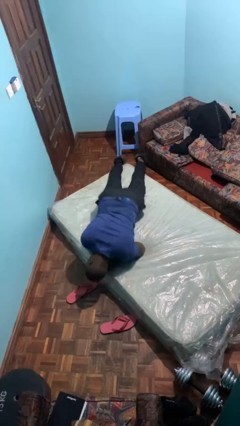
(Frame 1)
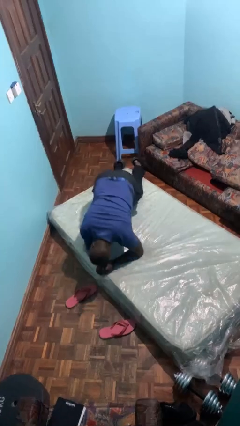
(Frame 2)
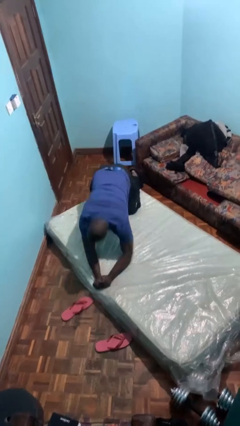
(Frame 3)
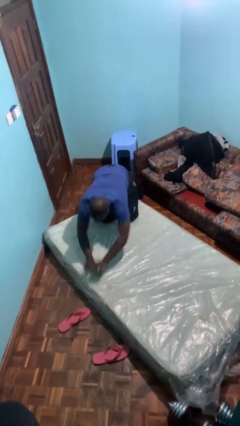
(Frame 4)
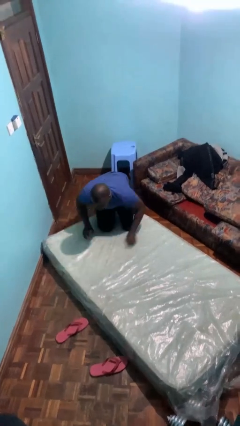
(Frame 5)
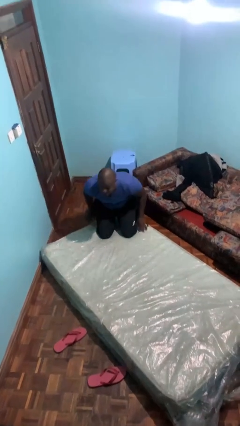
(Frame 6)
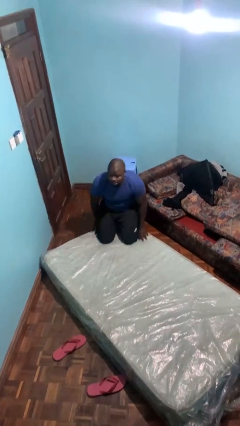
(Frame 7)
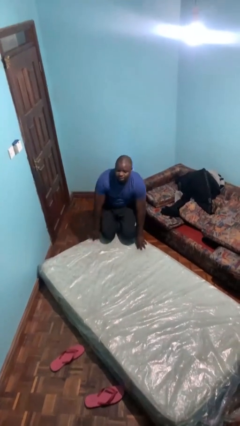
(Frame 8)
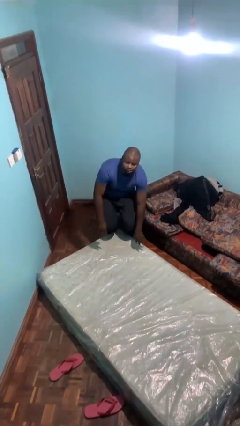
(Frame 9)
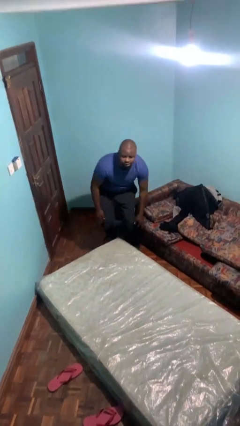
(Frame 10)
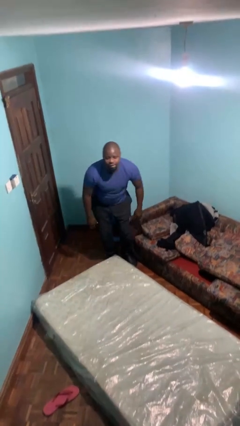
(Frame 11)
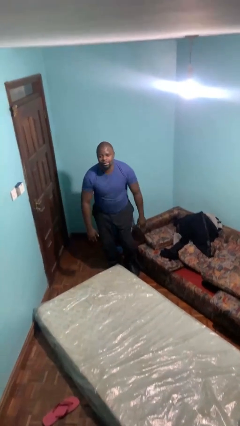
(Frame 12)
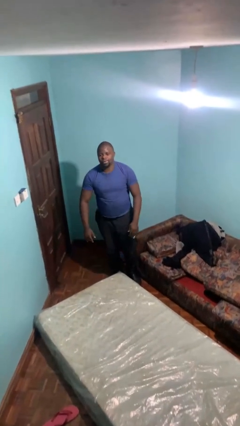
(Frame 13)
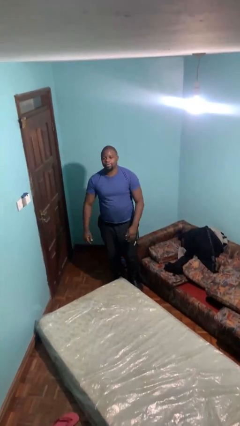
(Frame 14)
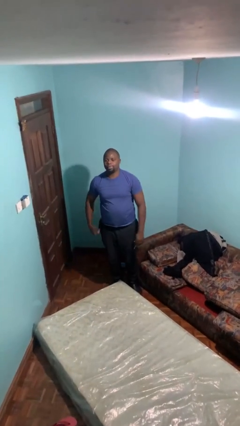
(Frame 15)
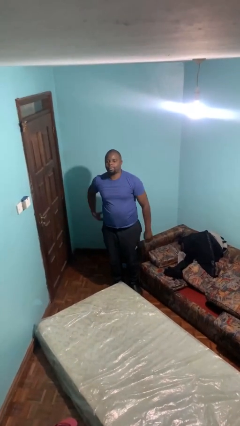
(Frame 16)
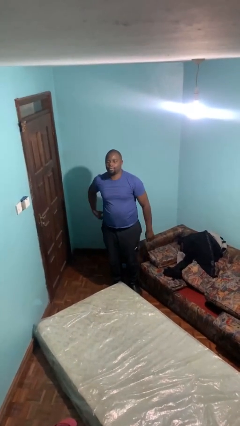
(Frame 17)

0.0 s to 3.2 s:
person stands up

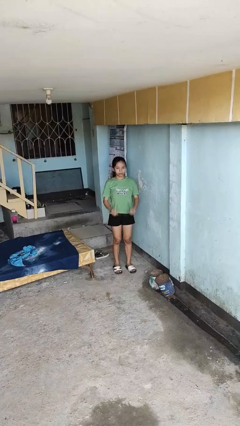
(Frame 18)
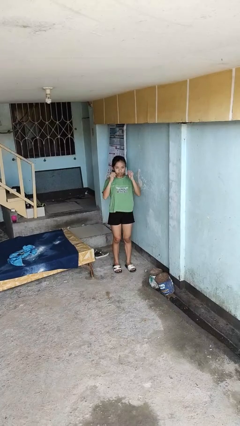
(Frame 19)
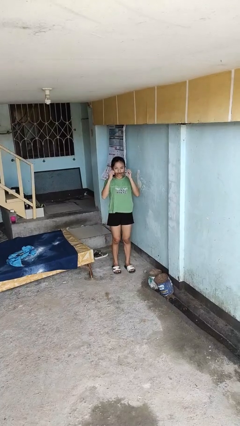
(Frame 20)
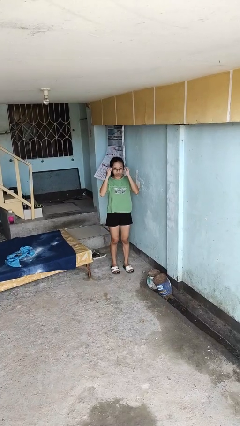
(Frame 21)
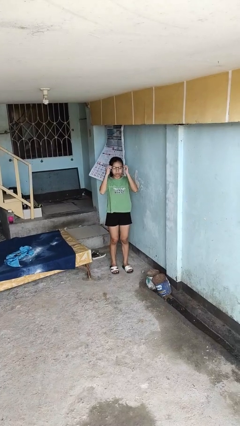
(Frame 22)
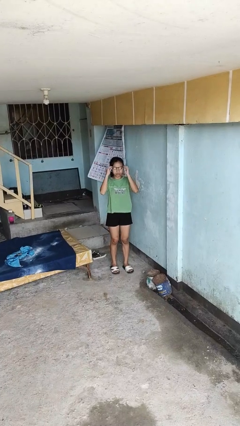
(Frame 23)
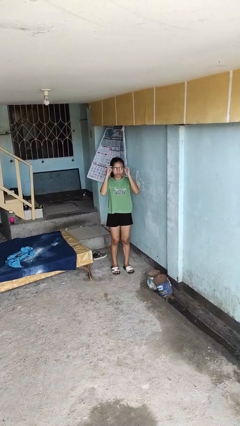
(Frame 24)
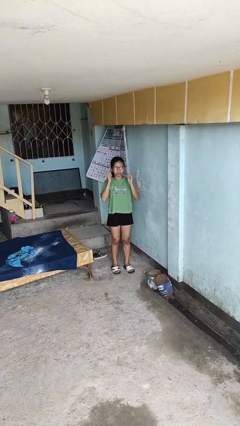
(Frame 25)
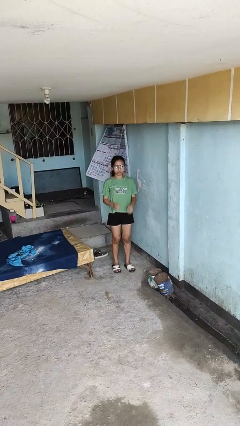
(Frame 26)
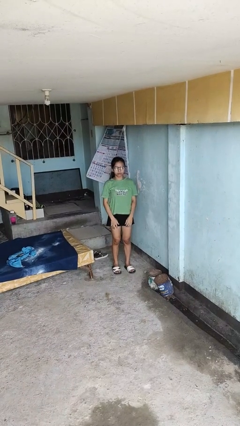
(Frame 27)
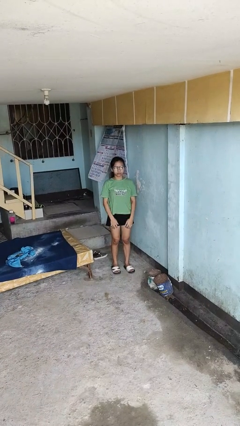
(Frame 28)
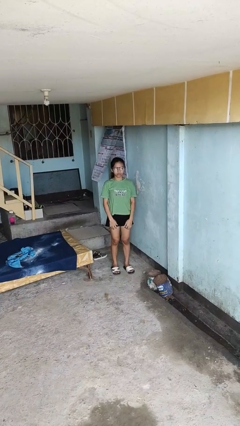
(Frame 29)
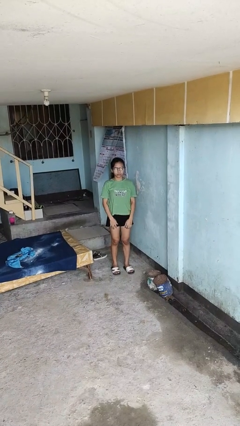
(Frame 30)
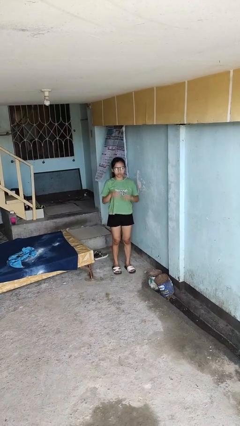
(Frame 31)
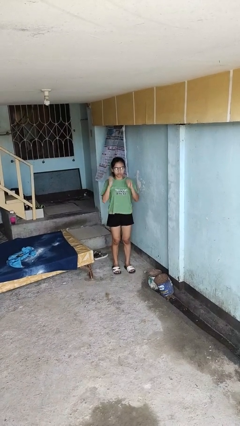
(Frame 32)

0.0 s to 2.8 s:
person puts on glasses

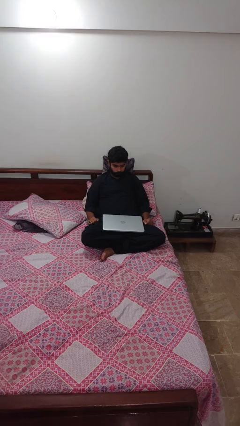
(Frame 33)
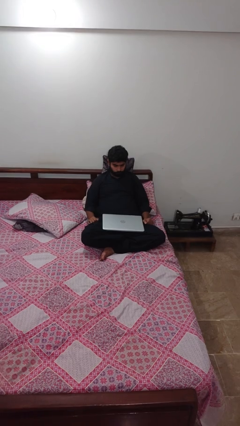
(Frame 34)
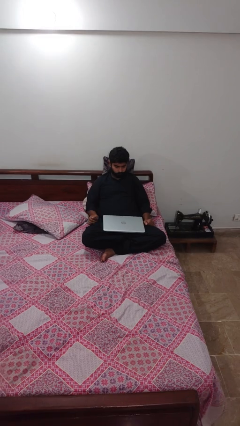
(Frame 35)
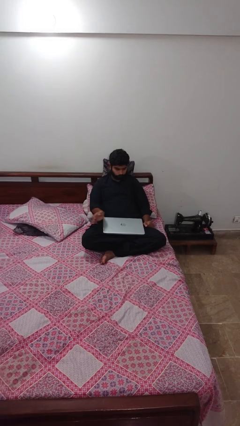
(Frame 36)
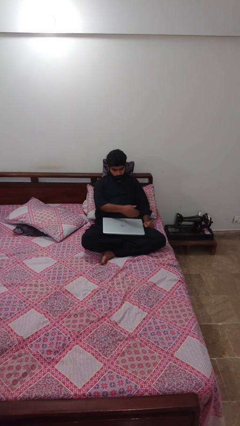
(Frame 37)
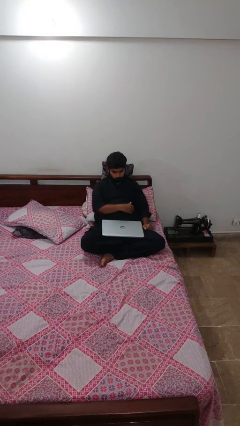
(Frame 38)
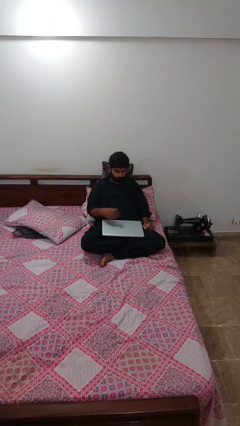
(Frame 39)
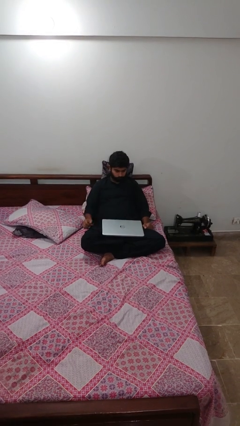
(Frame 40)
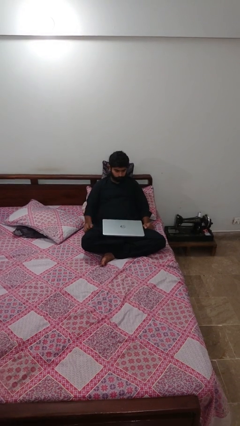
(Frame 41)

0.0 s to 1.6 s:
person waves hand over object

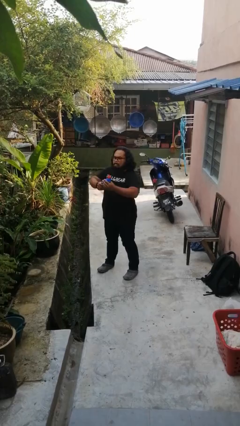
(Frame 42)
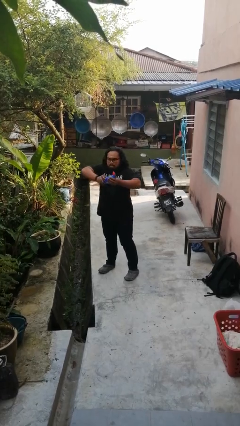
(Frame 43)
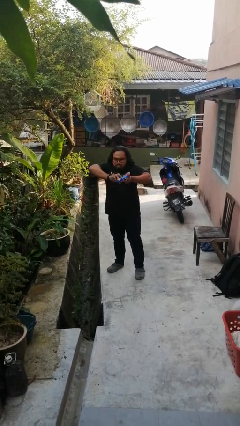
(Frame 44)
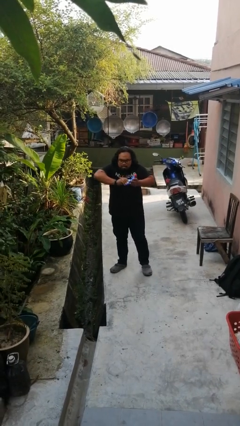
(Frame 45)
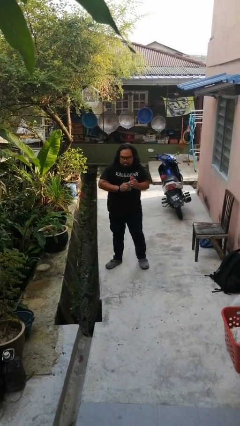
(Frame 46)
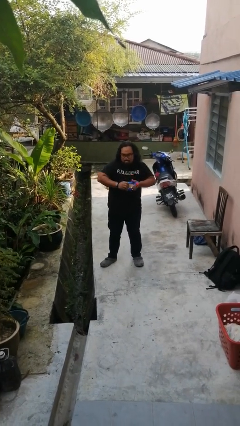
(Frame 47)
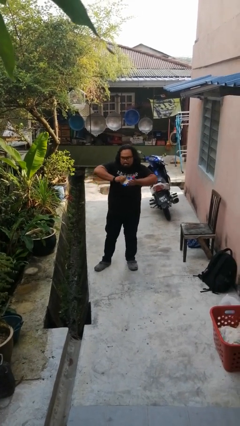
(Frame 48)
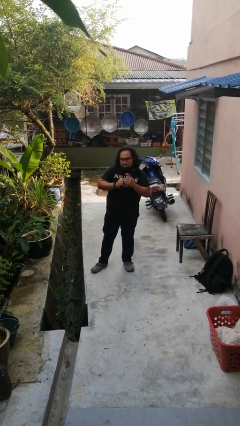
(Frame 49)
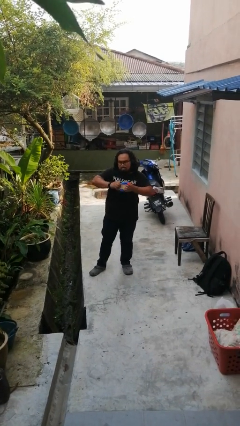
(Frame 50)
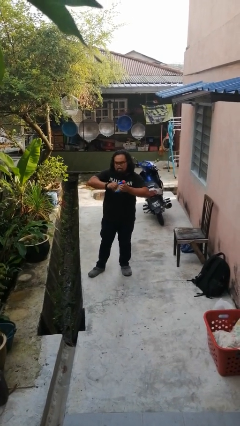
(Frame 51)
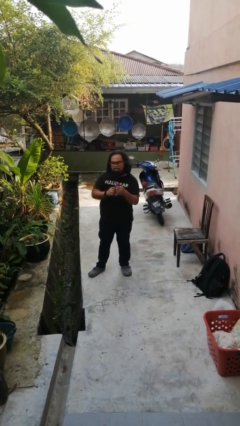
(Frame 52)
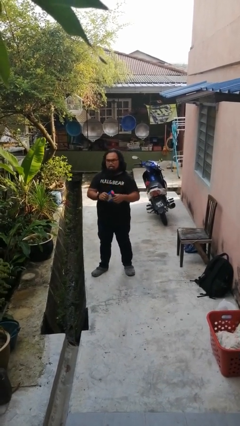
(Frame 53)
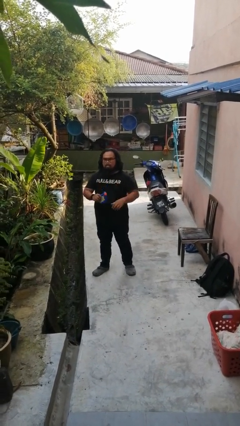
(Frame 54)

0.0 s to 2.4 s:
person squeezes object

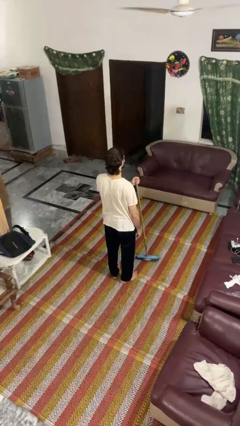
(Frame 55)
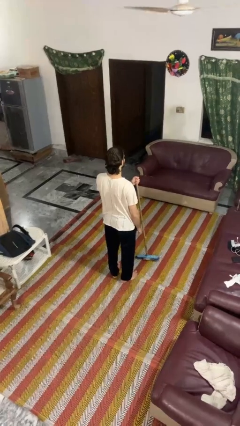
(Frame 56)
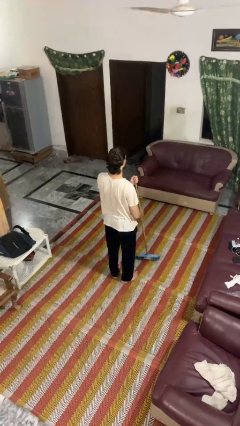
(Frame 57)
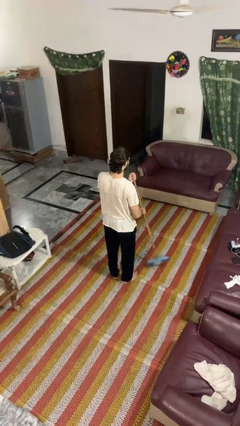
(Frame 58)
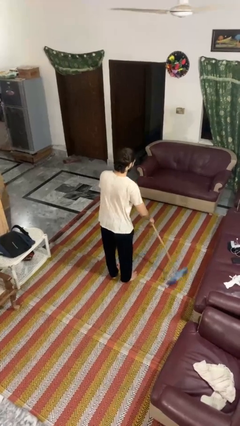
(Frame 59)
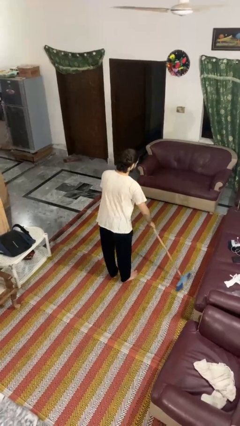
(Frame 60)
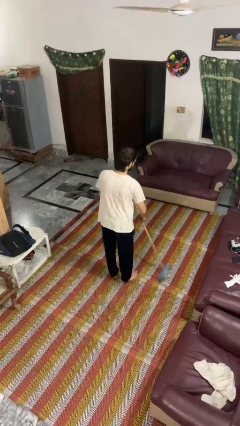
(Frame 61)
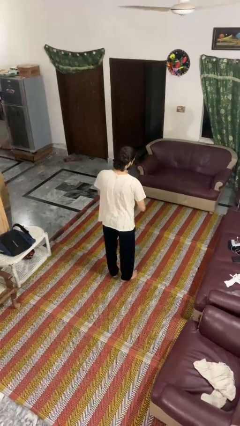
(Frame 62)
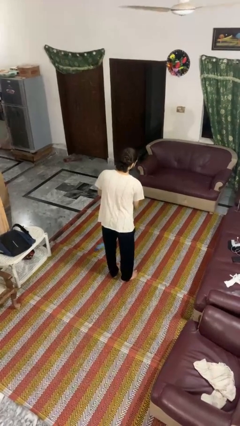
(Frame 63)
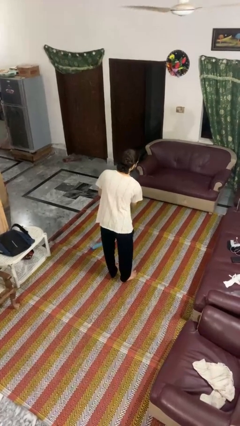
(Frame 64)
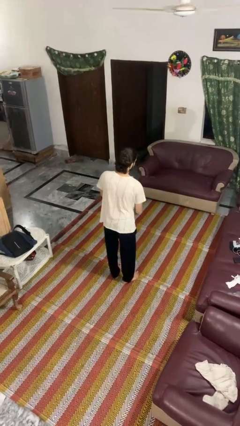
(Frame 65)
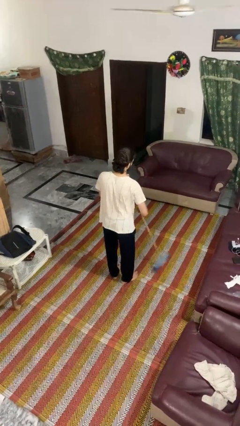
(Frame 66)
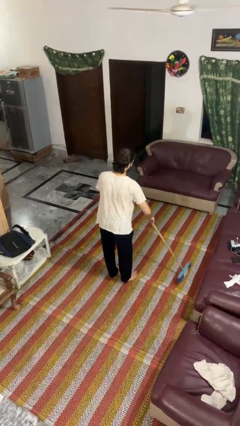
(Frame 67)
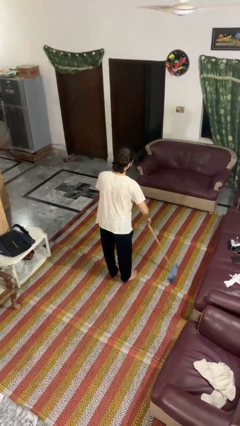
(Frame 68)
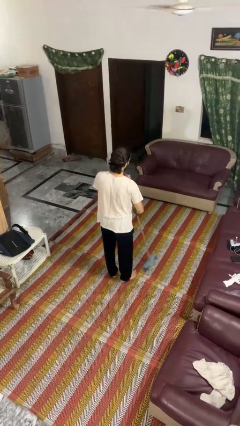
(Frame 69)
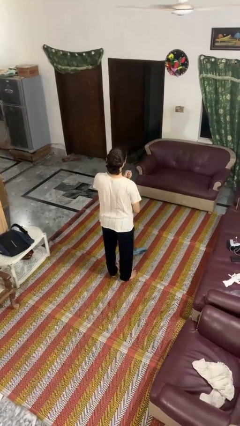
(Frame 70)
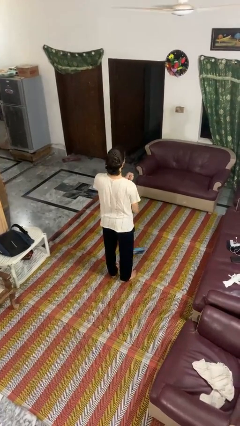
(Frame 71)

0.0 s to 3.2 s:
person sweeps floor

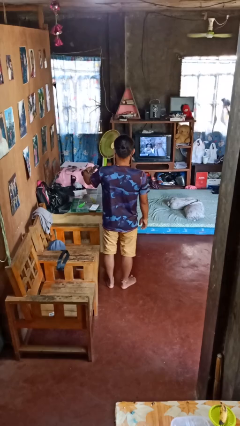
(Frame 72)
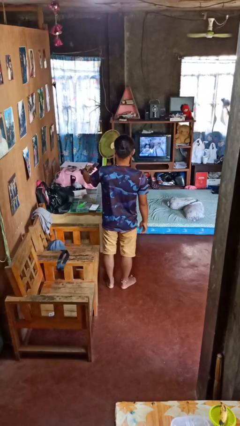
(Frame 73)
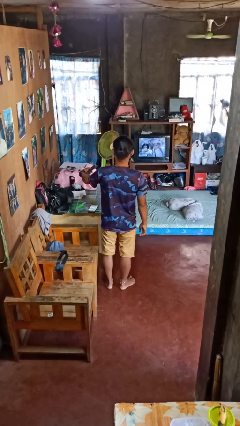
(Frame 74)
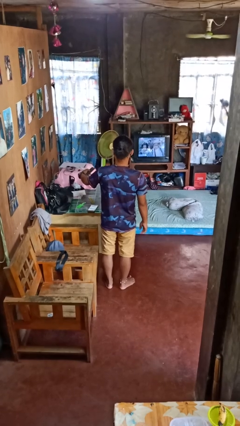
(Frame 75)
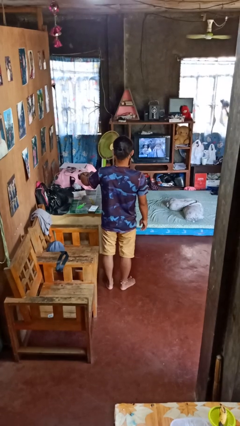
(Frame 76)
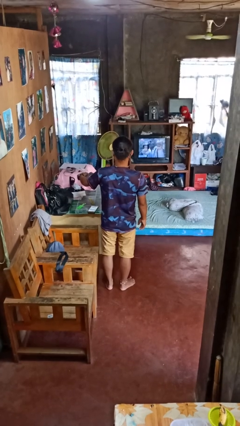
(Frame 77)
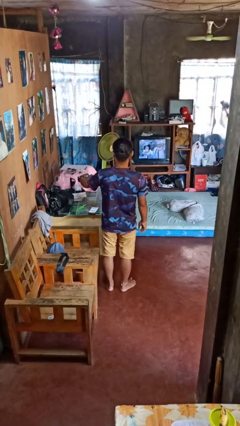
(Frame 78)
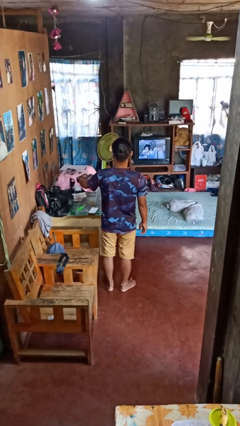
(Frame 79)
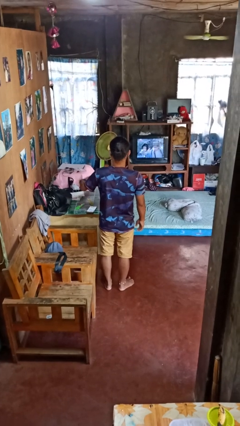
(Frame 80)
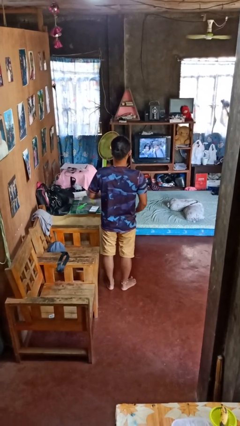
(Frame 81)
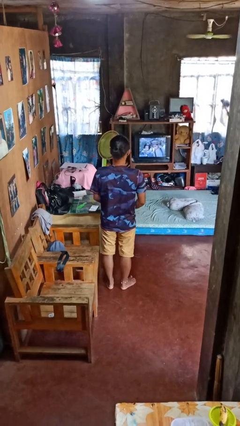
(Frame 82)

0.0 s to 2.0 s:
person uses television remote

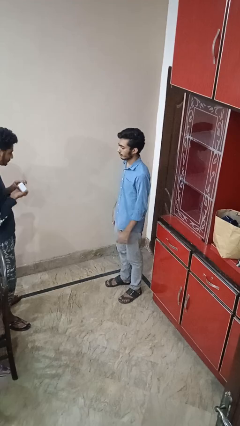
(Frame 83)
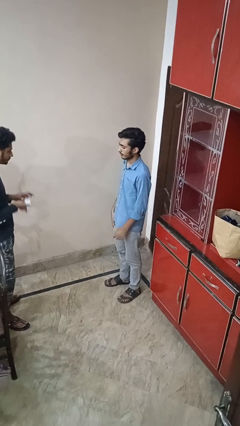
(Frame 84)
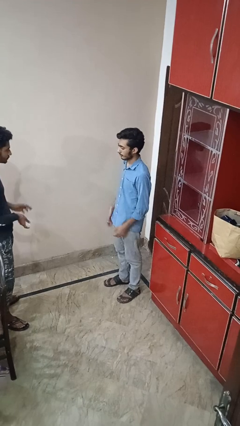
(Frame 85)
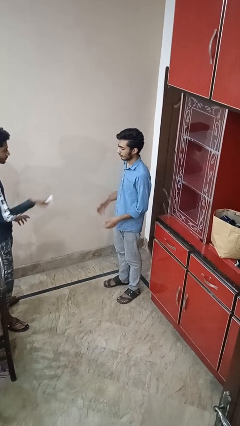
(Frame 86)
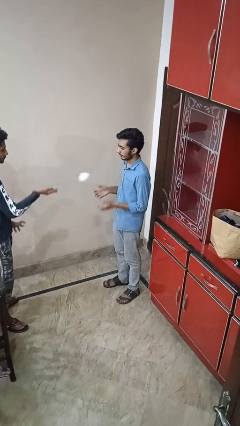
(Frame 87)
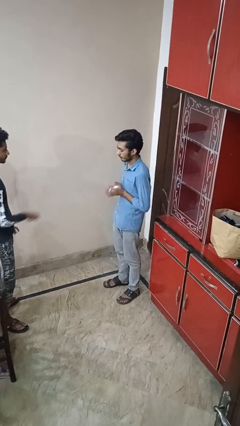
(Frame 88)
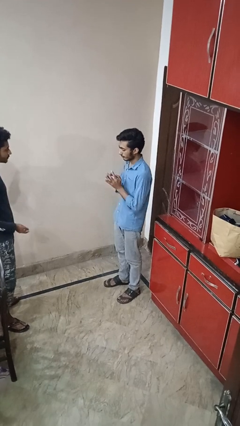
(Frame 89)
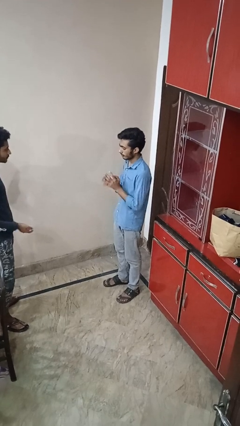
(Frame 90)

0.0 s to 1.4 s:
person catches object from person

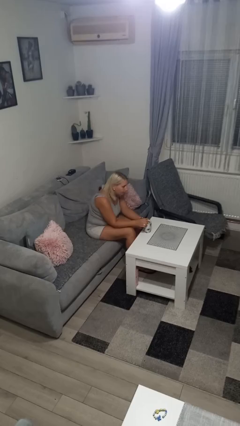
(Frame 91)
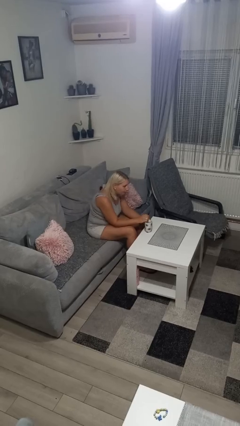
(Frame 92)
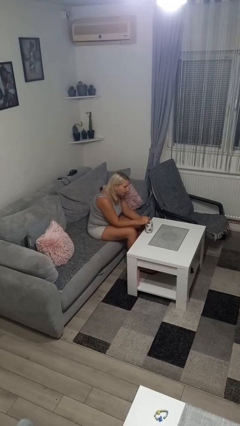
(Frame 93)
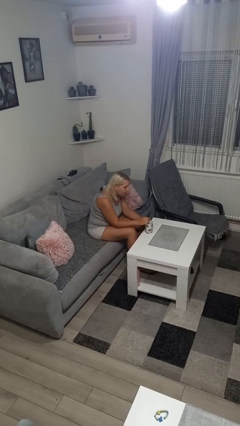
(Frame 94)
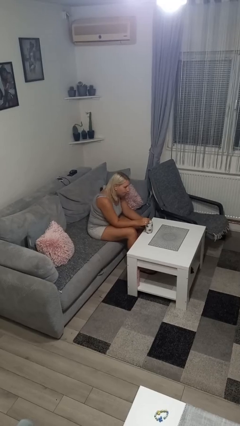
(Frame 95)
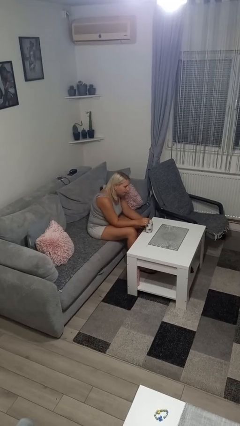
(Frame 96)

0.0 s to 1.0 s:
person stirs mug
